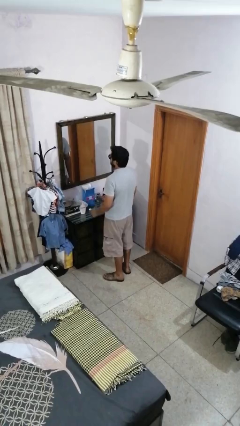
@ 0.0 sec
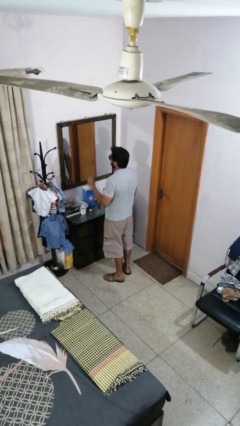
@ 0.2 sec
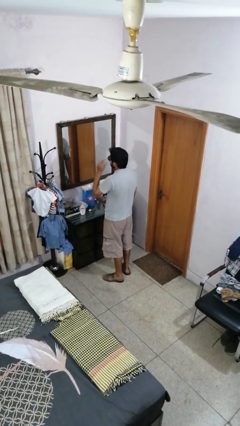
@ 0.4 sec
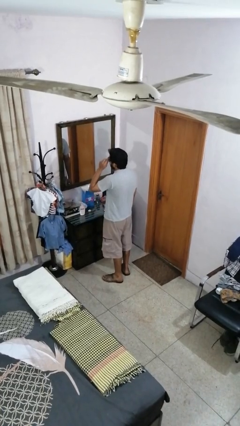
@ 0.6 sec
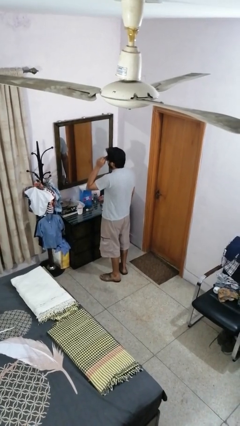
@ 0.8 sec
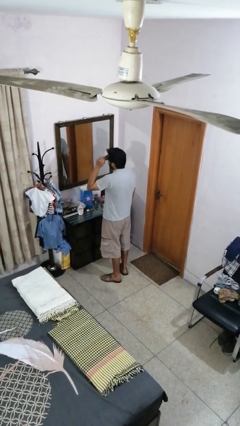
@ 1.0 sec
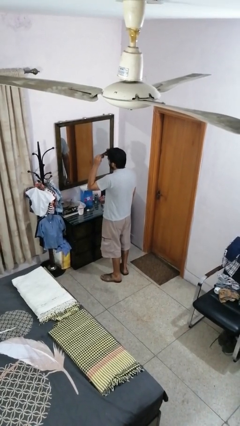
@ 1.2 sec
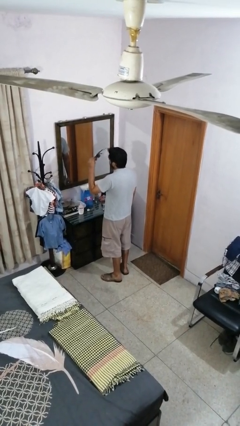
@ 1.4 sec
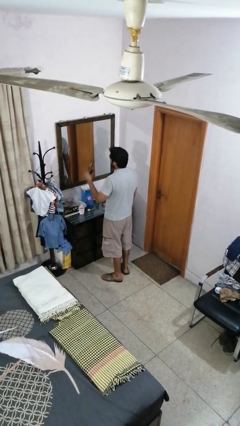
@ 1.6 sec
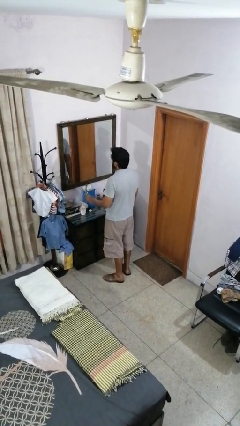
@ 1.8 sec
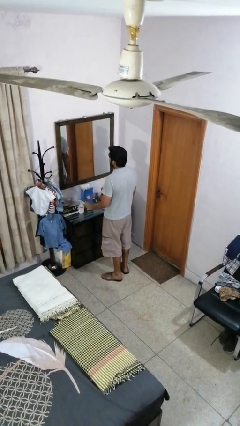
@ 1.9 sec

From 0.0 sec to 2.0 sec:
person takes off sunglasses

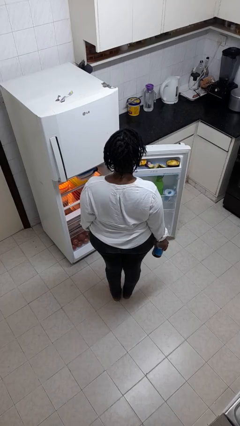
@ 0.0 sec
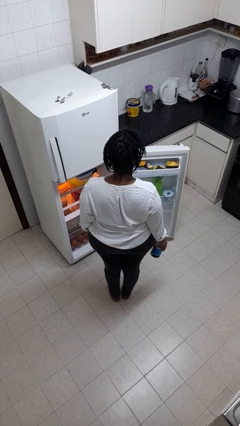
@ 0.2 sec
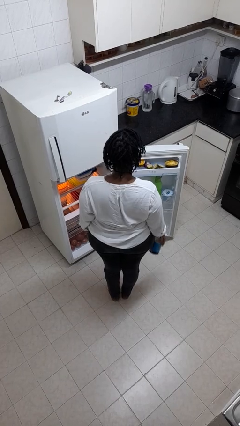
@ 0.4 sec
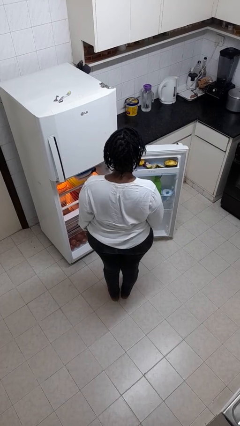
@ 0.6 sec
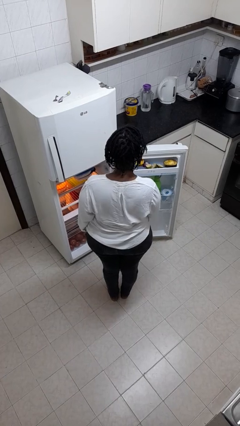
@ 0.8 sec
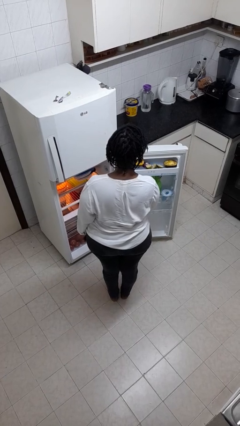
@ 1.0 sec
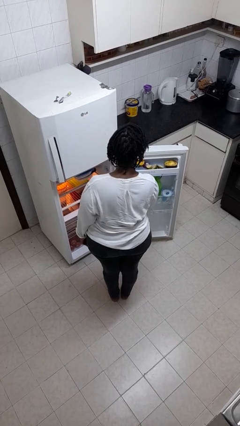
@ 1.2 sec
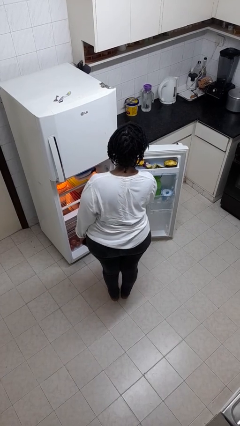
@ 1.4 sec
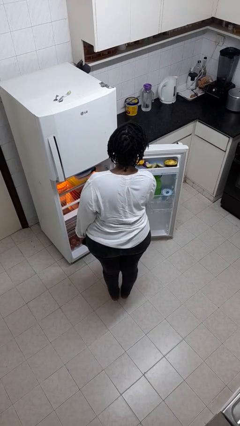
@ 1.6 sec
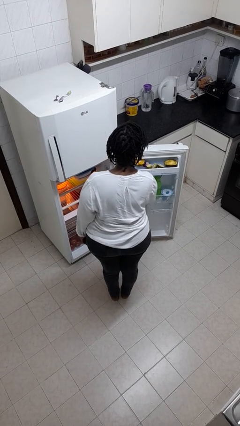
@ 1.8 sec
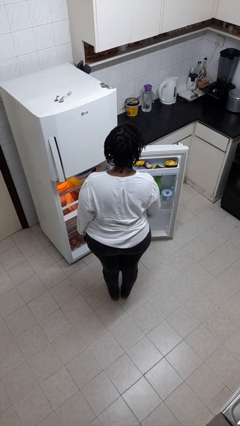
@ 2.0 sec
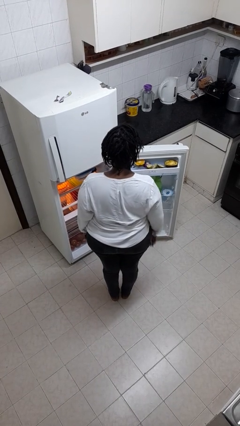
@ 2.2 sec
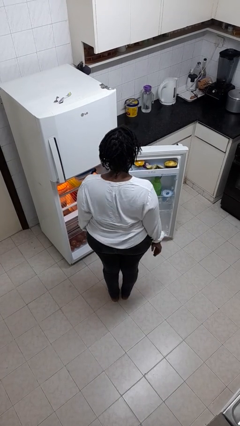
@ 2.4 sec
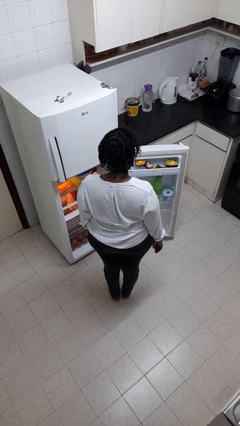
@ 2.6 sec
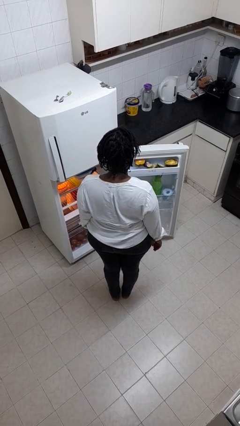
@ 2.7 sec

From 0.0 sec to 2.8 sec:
person puts object into refrigerator

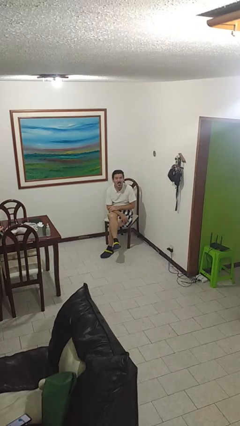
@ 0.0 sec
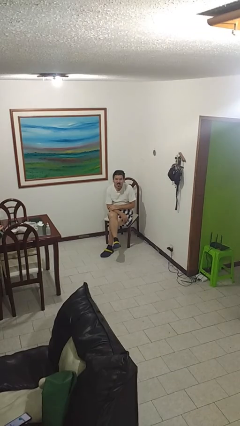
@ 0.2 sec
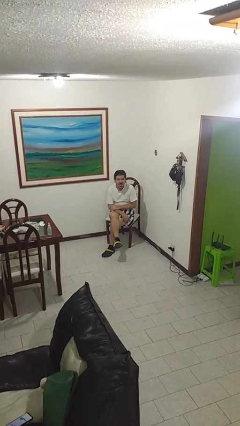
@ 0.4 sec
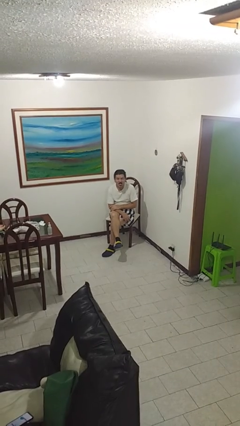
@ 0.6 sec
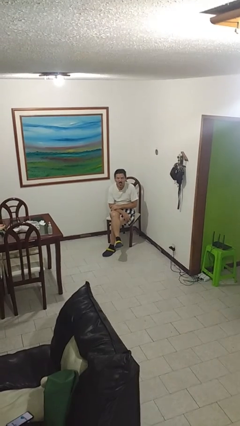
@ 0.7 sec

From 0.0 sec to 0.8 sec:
person sticks out tongue

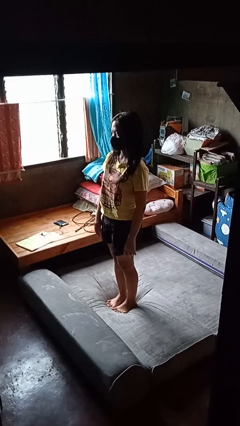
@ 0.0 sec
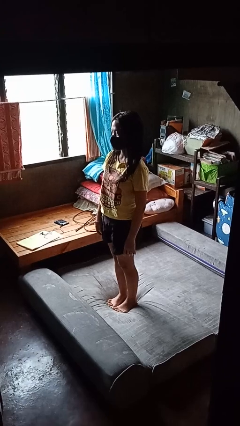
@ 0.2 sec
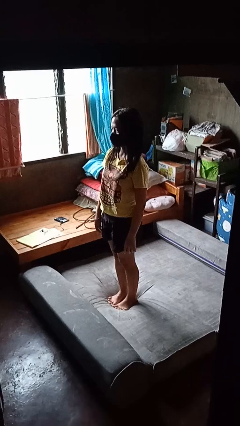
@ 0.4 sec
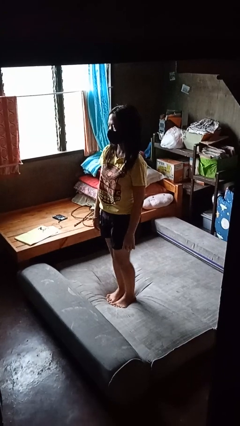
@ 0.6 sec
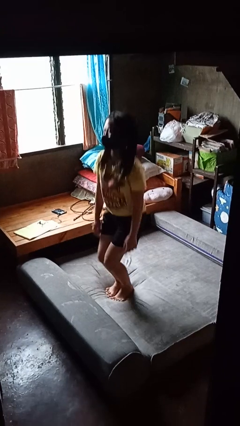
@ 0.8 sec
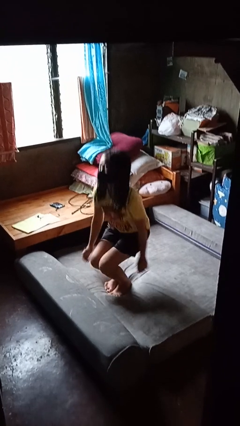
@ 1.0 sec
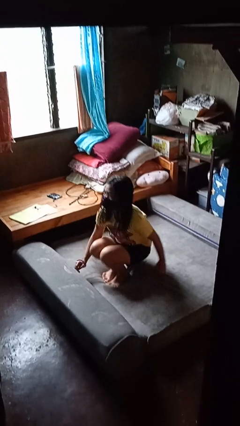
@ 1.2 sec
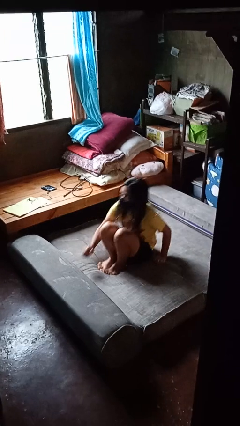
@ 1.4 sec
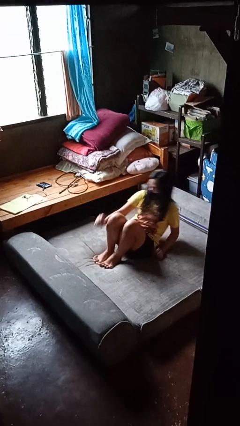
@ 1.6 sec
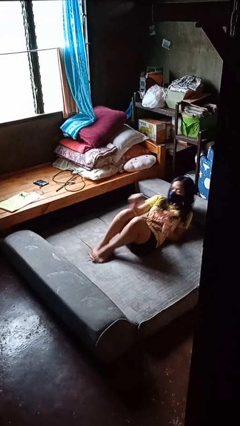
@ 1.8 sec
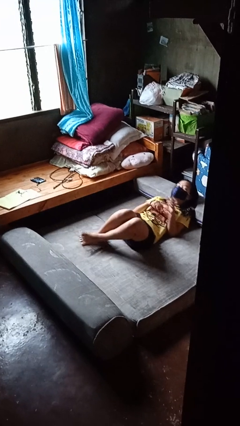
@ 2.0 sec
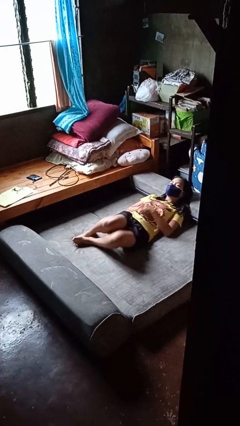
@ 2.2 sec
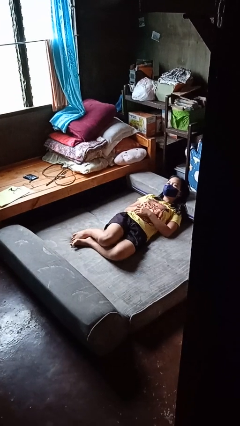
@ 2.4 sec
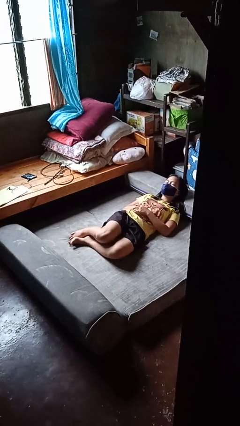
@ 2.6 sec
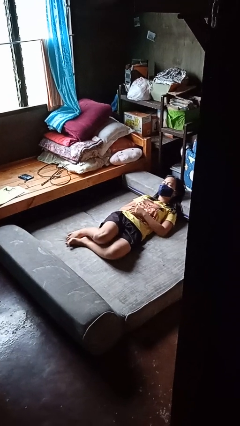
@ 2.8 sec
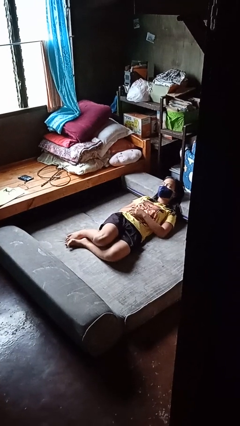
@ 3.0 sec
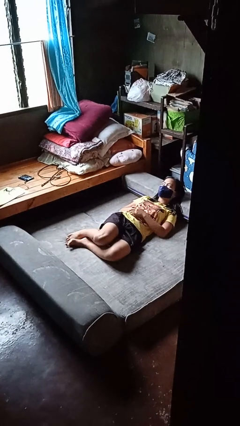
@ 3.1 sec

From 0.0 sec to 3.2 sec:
person lies down on bed

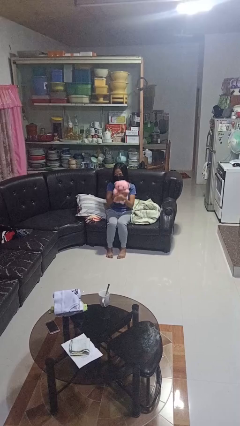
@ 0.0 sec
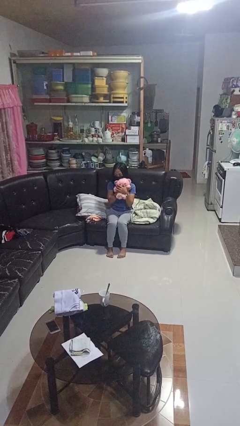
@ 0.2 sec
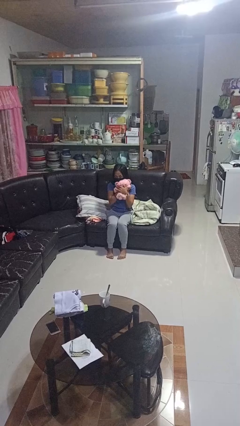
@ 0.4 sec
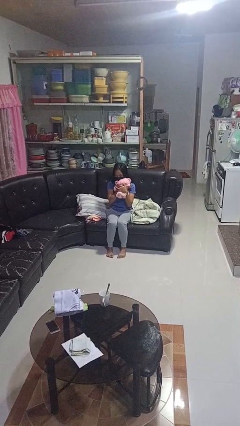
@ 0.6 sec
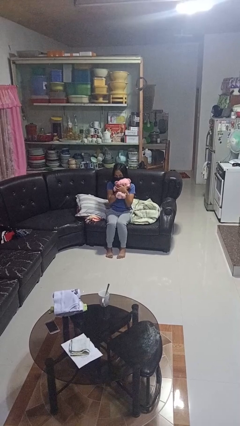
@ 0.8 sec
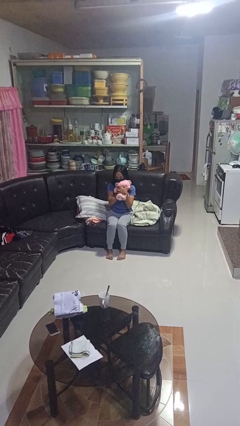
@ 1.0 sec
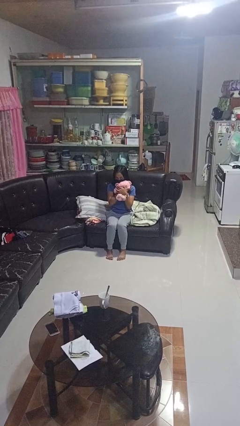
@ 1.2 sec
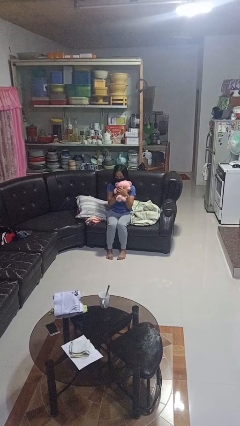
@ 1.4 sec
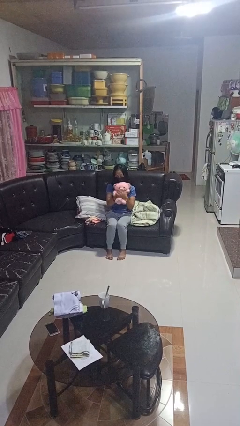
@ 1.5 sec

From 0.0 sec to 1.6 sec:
person hugs stuffed animal

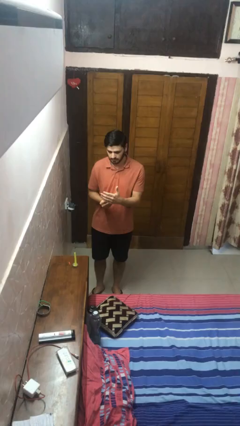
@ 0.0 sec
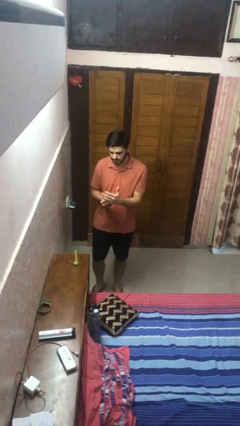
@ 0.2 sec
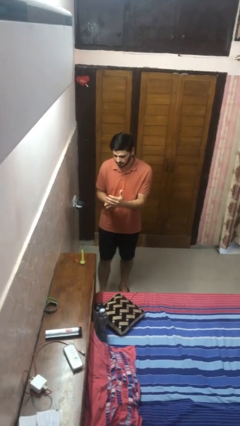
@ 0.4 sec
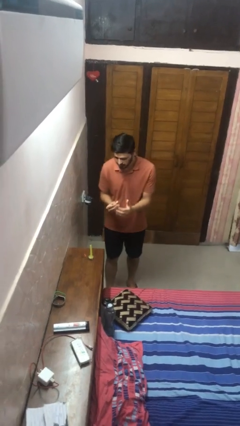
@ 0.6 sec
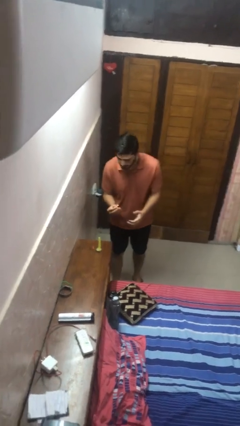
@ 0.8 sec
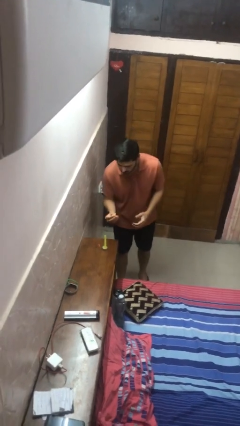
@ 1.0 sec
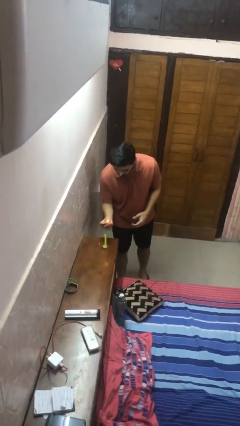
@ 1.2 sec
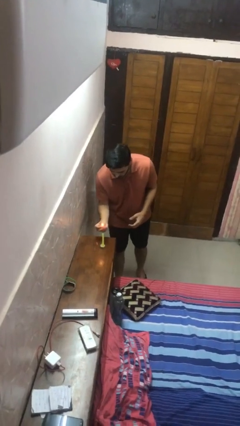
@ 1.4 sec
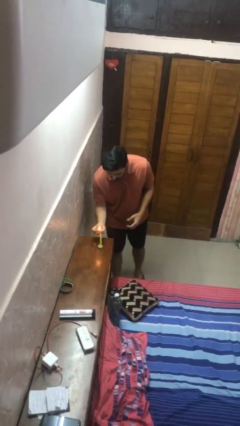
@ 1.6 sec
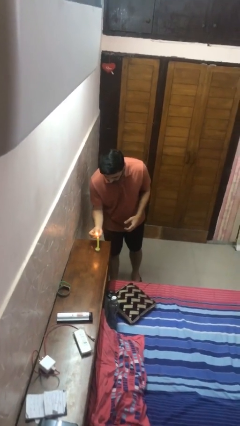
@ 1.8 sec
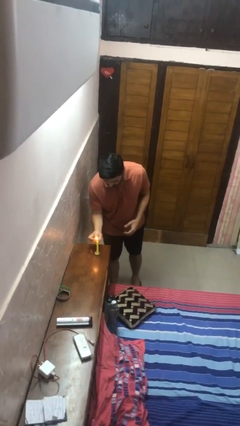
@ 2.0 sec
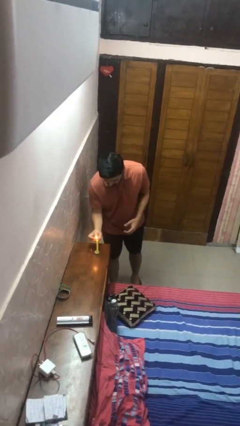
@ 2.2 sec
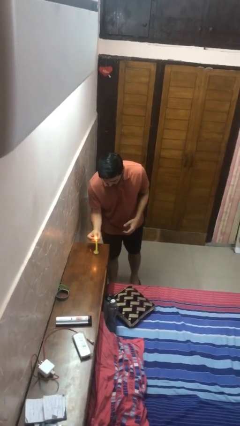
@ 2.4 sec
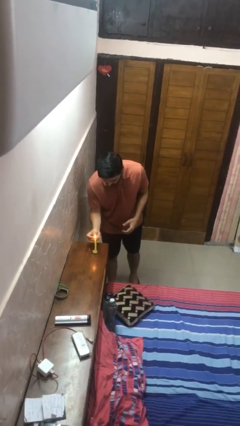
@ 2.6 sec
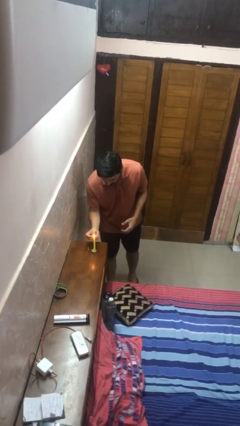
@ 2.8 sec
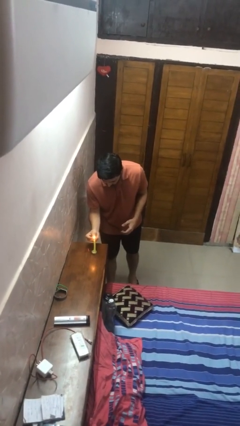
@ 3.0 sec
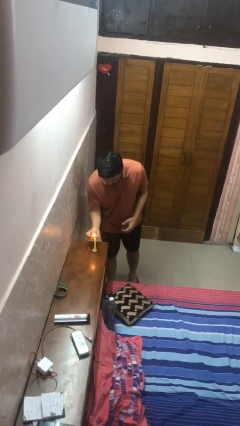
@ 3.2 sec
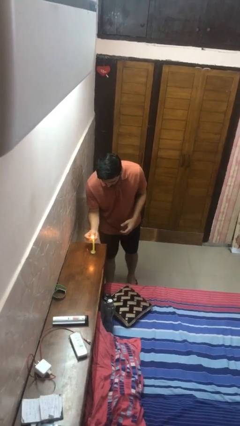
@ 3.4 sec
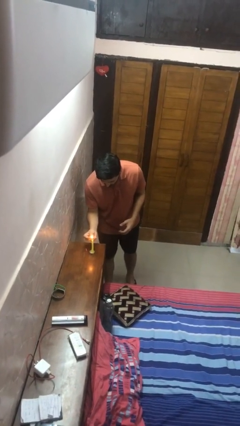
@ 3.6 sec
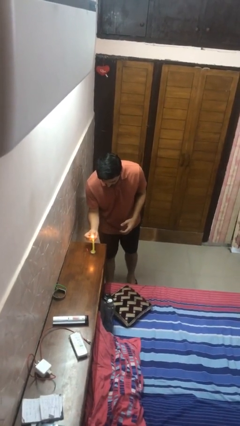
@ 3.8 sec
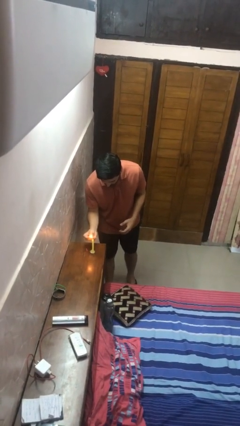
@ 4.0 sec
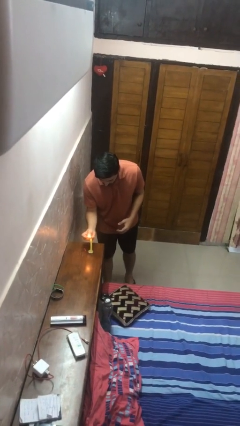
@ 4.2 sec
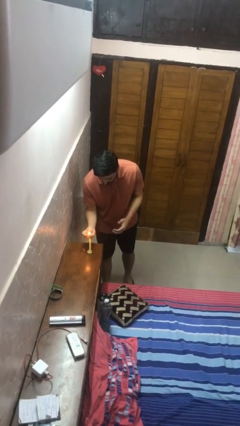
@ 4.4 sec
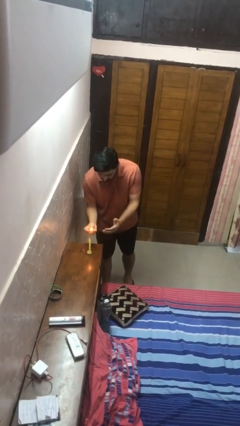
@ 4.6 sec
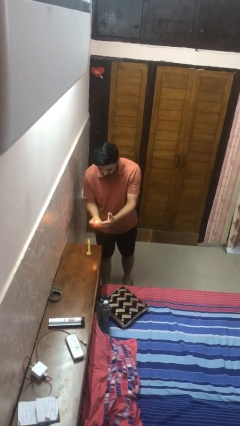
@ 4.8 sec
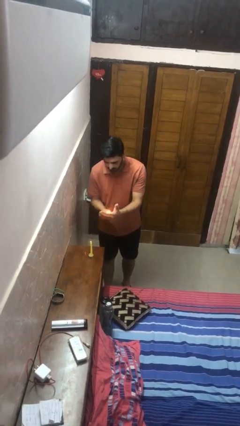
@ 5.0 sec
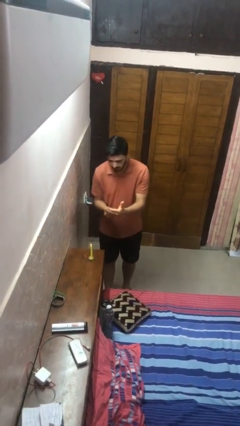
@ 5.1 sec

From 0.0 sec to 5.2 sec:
person lights candle

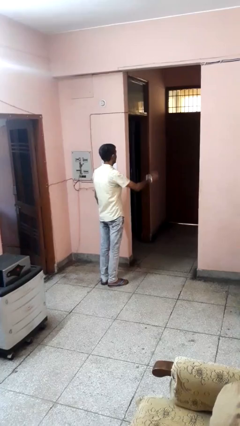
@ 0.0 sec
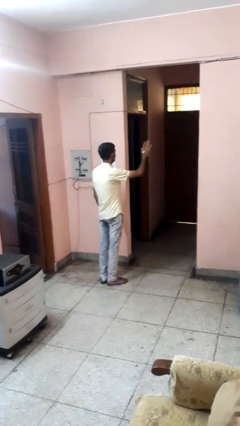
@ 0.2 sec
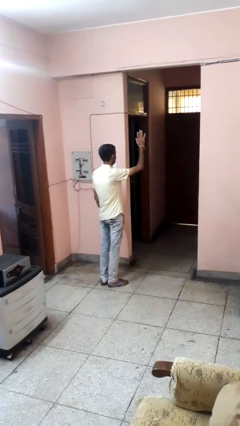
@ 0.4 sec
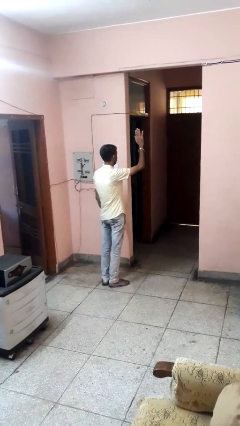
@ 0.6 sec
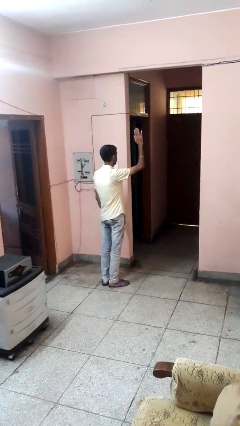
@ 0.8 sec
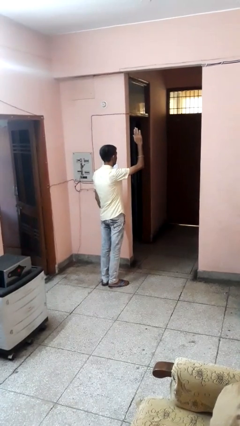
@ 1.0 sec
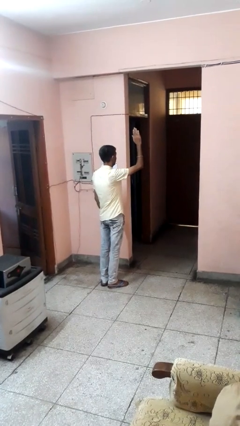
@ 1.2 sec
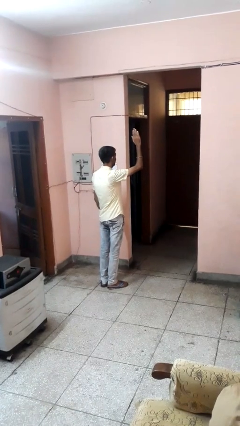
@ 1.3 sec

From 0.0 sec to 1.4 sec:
person gestures raise hand
